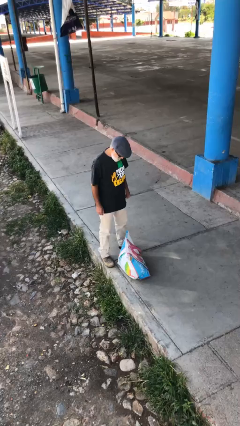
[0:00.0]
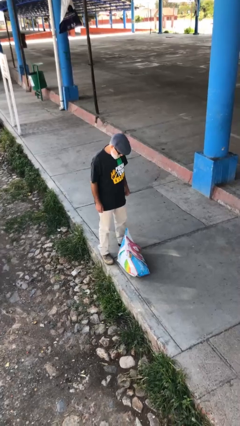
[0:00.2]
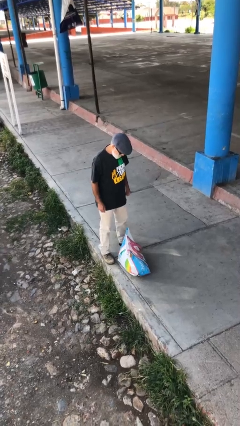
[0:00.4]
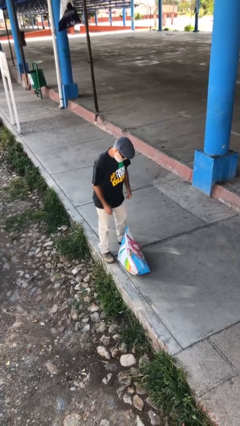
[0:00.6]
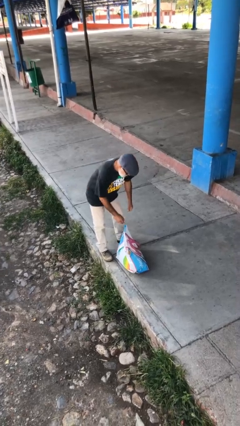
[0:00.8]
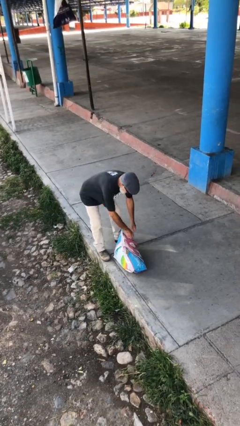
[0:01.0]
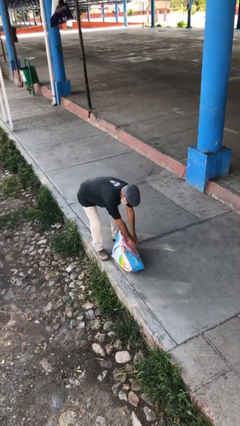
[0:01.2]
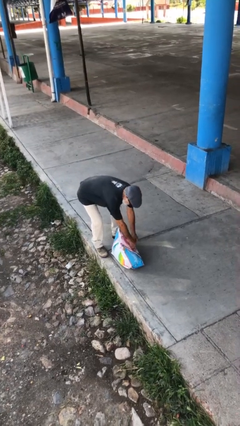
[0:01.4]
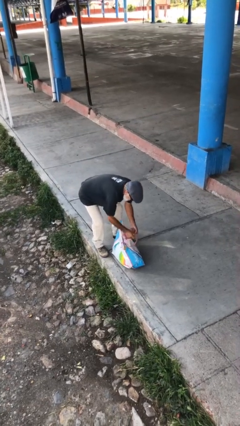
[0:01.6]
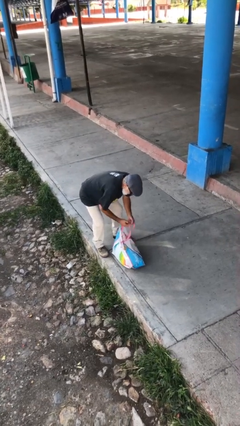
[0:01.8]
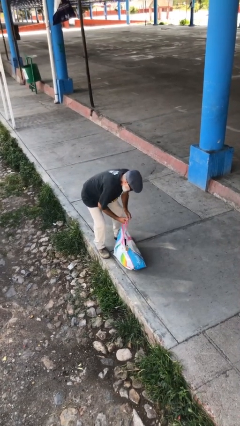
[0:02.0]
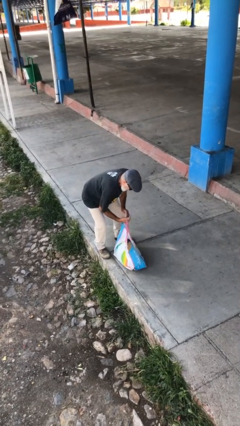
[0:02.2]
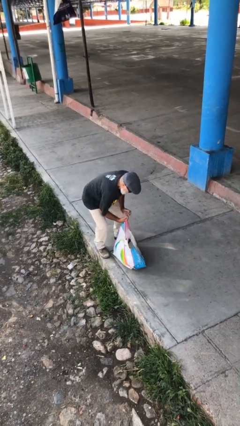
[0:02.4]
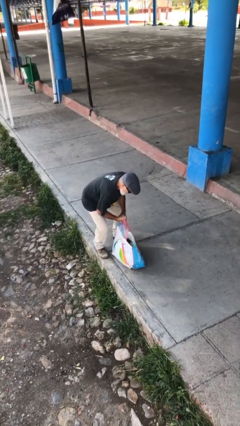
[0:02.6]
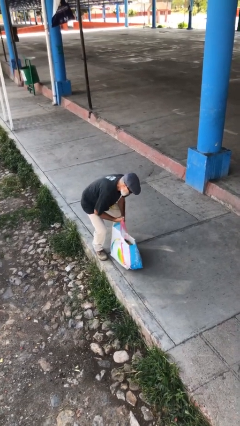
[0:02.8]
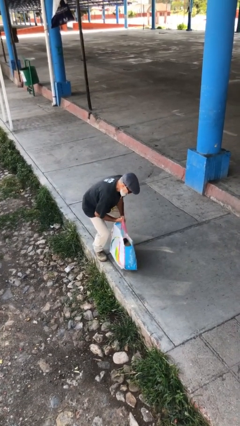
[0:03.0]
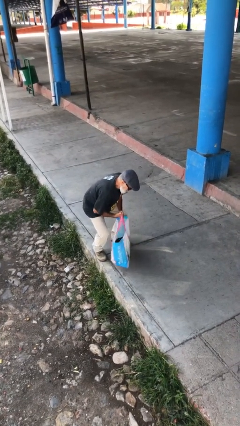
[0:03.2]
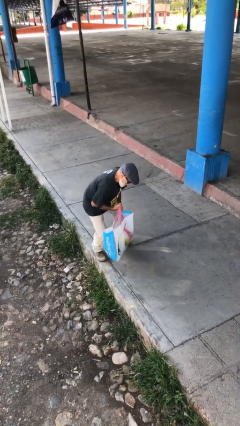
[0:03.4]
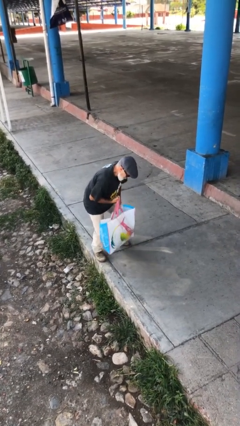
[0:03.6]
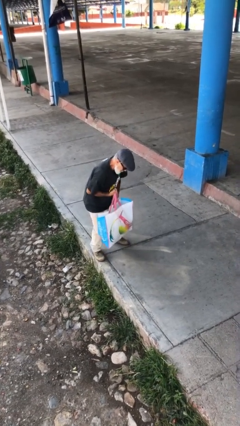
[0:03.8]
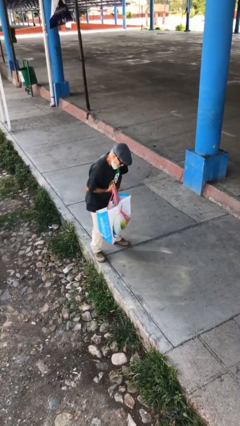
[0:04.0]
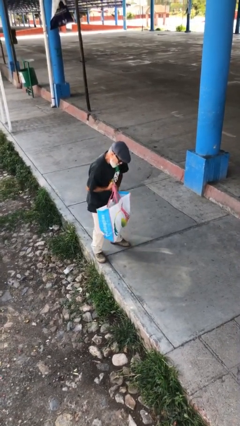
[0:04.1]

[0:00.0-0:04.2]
person picks up object from floor

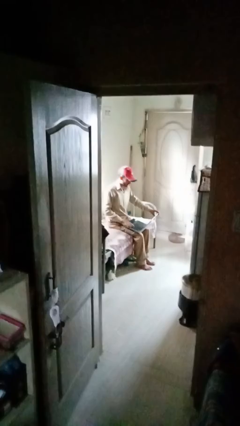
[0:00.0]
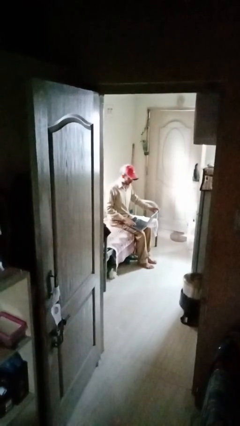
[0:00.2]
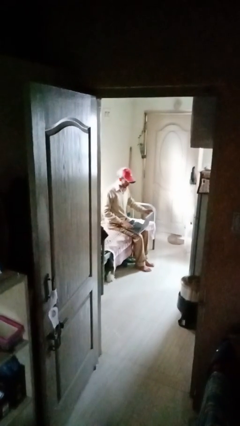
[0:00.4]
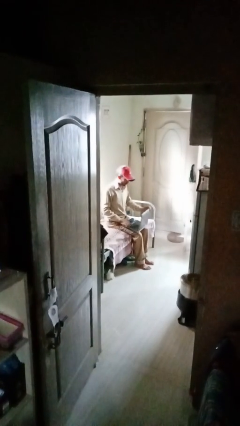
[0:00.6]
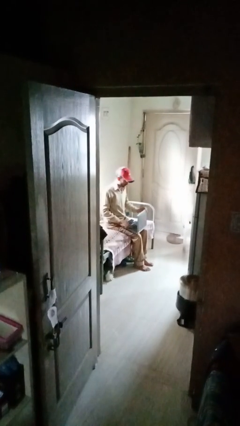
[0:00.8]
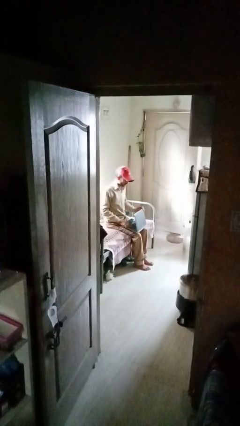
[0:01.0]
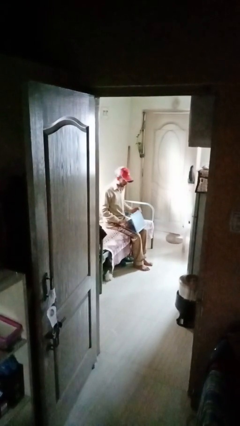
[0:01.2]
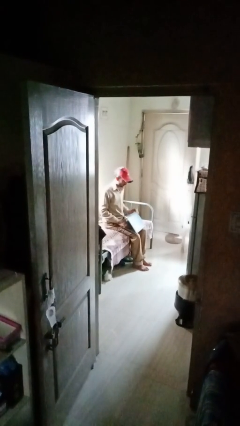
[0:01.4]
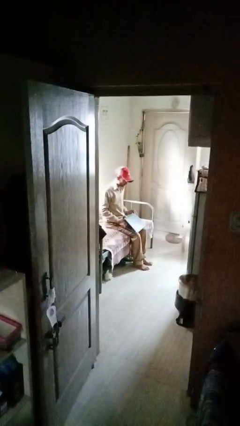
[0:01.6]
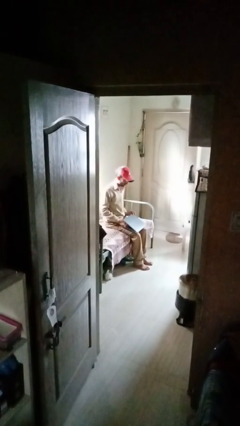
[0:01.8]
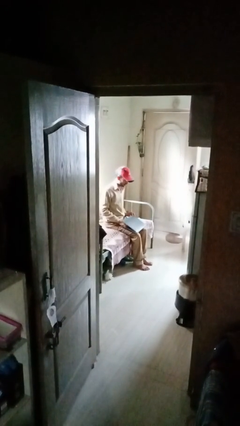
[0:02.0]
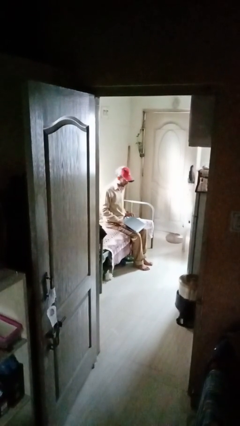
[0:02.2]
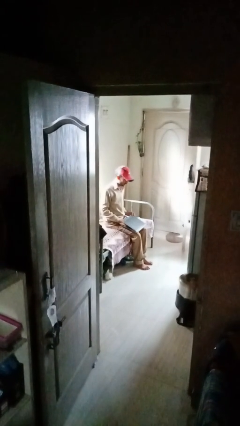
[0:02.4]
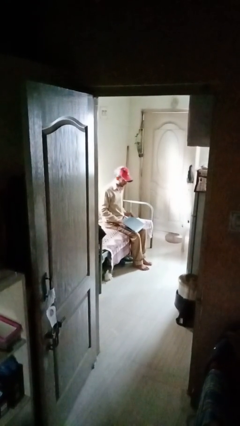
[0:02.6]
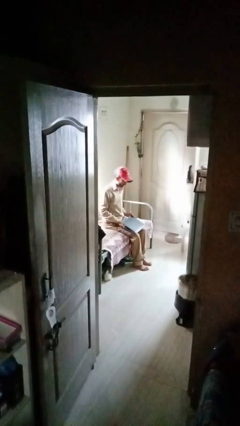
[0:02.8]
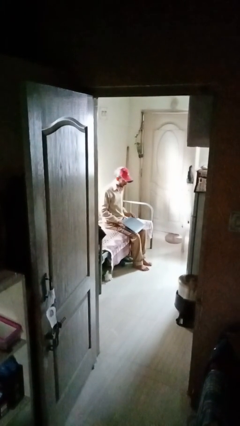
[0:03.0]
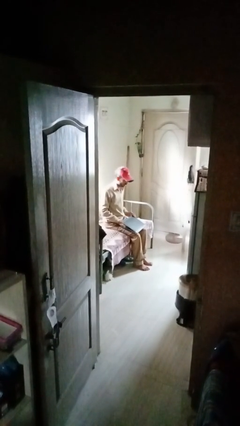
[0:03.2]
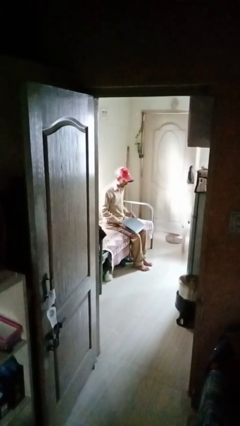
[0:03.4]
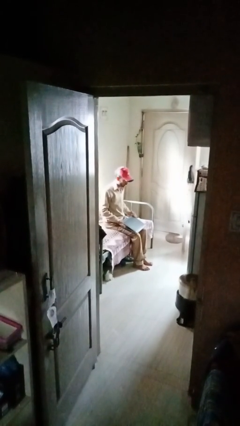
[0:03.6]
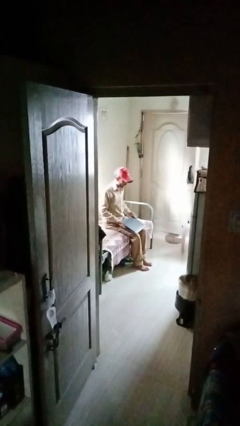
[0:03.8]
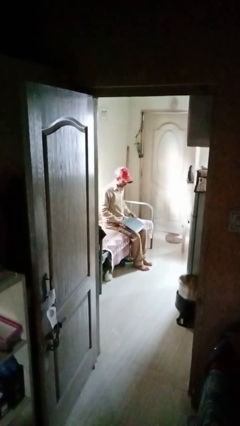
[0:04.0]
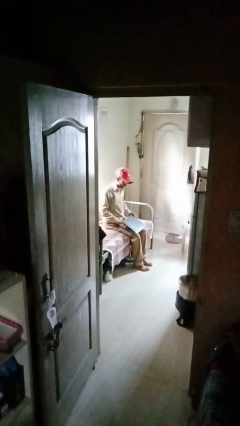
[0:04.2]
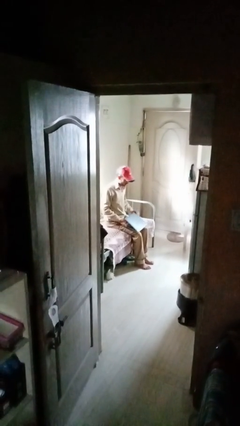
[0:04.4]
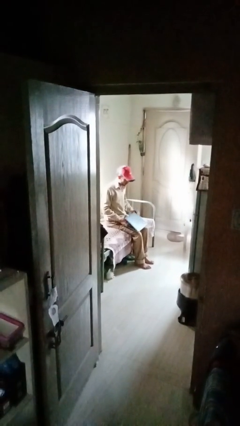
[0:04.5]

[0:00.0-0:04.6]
person closes laptop

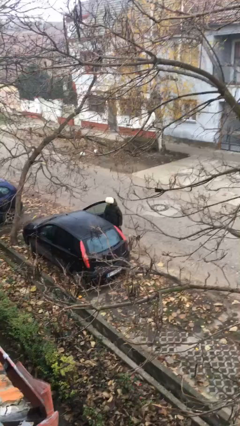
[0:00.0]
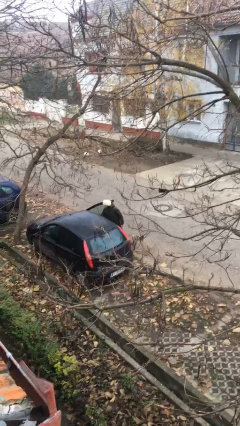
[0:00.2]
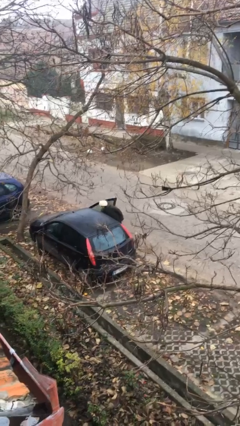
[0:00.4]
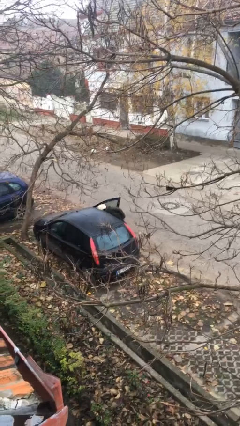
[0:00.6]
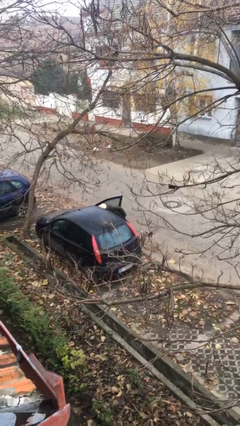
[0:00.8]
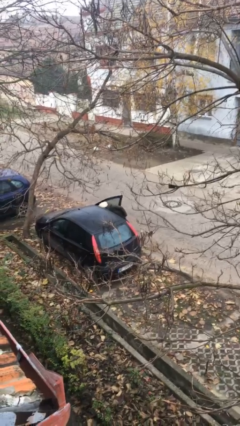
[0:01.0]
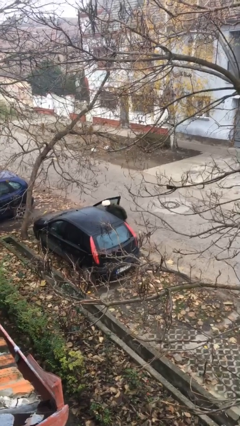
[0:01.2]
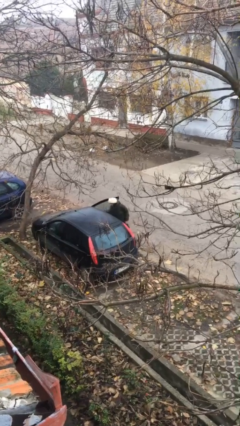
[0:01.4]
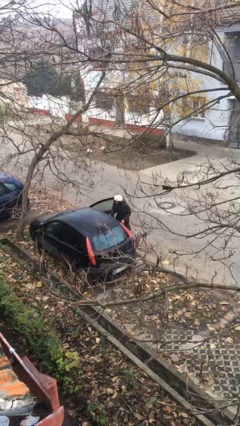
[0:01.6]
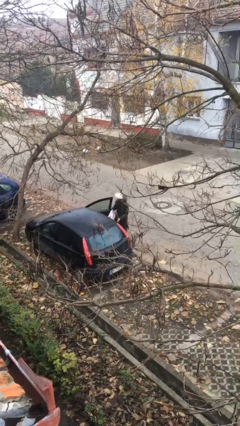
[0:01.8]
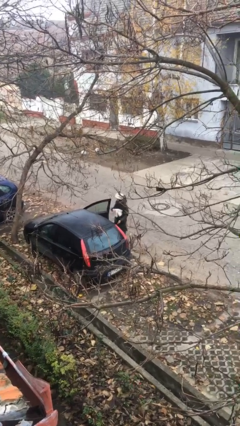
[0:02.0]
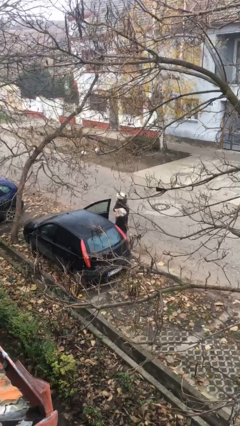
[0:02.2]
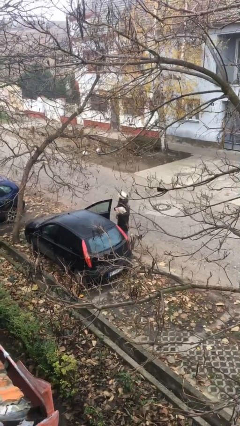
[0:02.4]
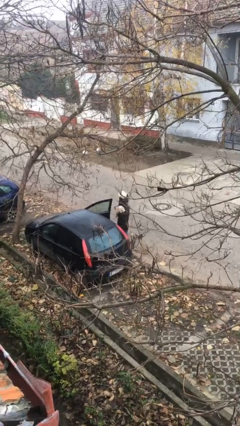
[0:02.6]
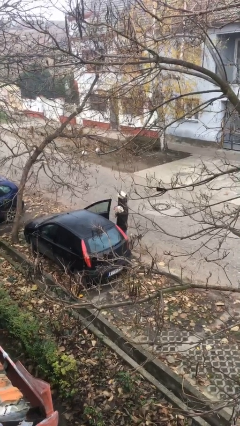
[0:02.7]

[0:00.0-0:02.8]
person unloads car

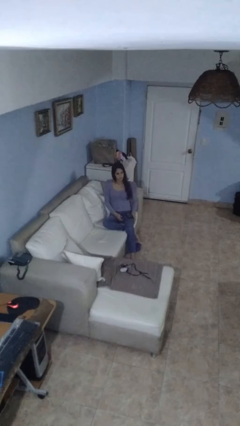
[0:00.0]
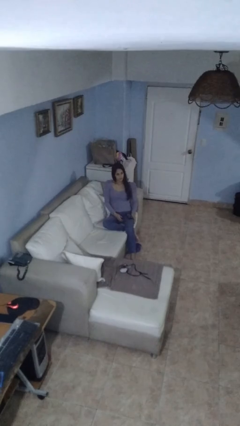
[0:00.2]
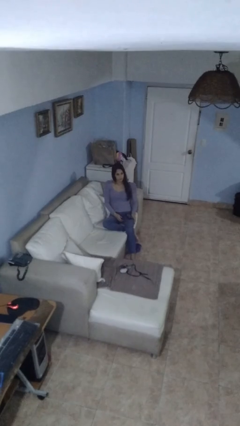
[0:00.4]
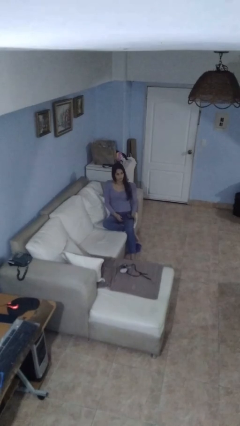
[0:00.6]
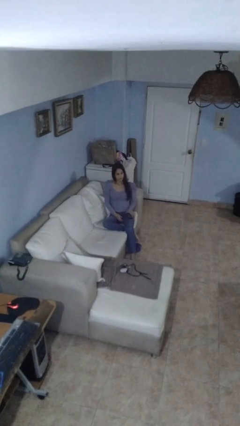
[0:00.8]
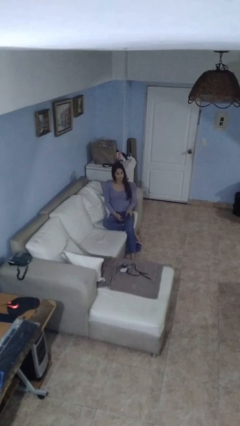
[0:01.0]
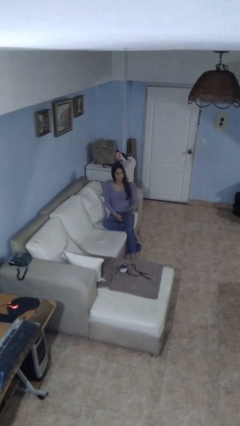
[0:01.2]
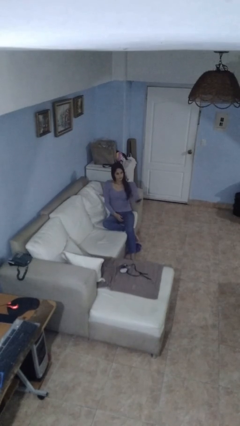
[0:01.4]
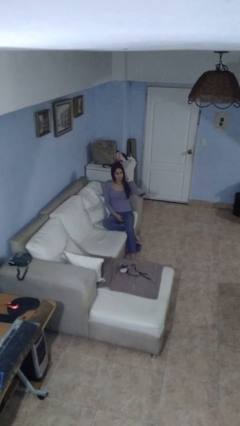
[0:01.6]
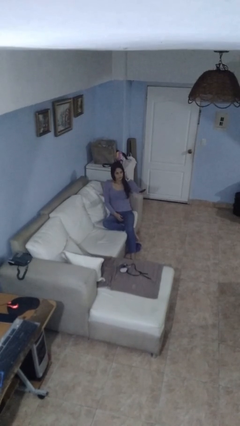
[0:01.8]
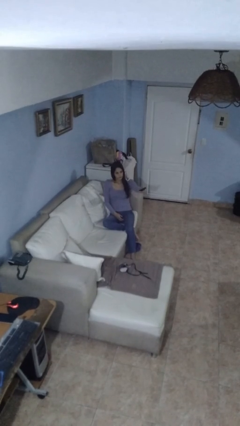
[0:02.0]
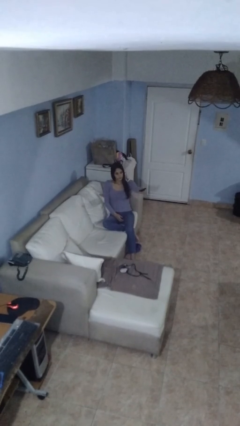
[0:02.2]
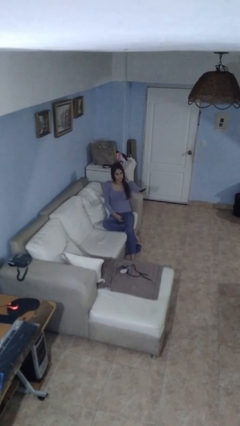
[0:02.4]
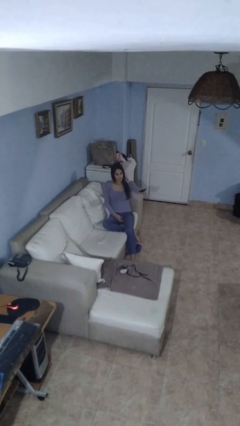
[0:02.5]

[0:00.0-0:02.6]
person uses television remote

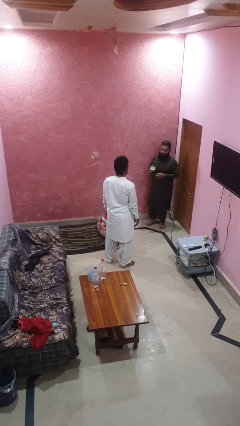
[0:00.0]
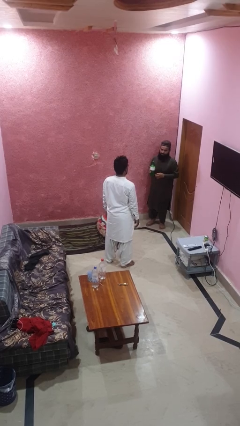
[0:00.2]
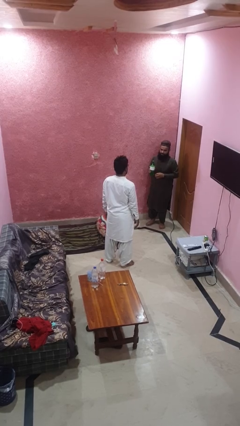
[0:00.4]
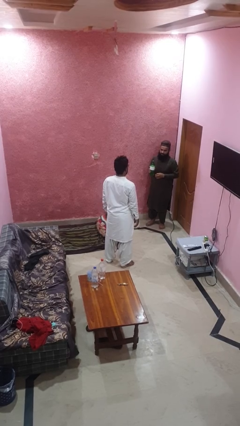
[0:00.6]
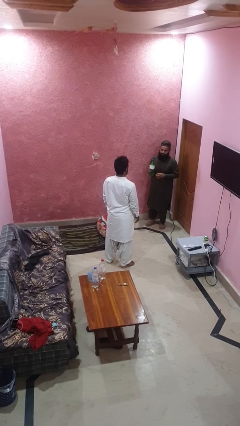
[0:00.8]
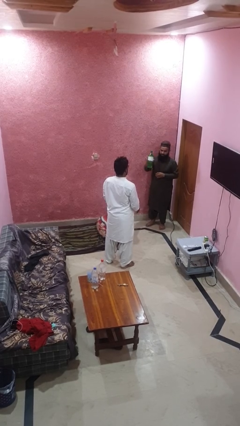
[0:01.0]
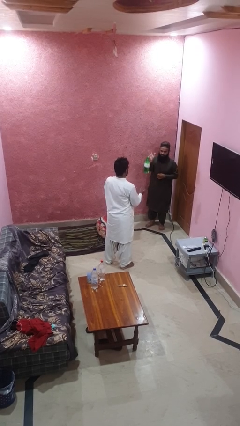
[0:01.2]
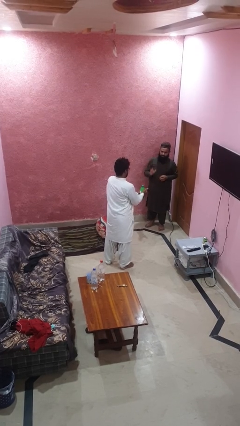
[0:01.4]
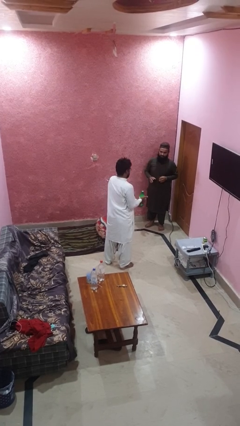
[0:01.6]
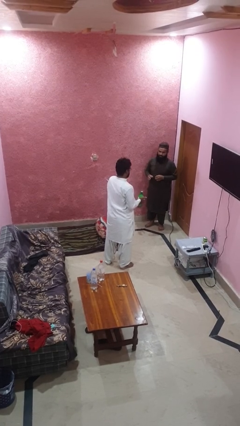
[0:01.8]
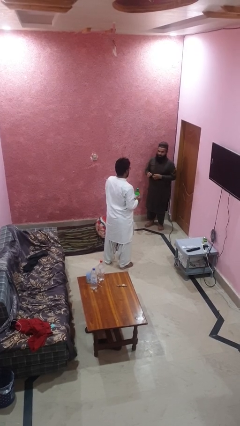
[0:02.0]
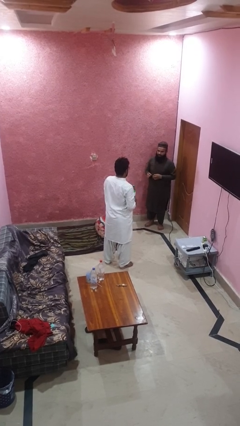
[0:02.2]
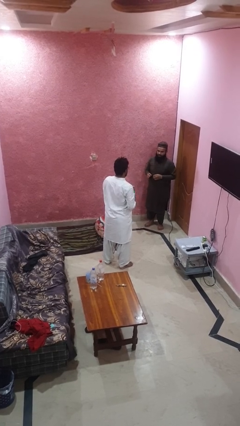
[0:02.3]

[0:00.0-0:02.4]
person catches object from person

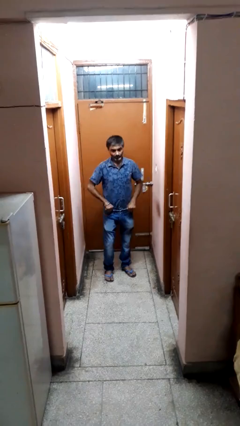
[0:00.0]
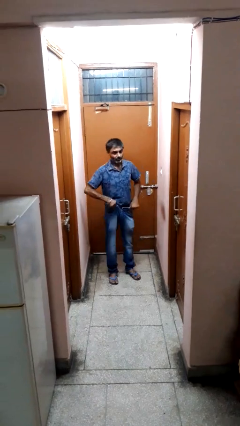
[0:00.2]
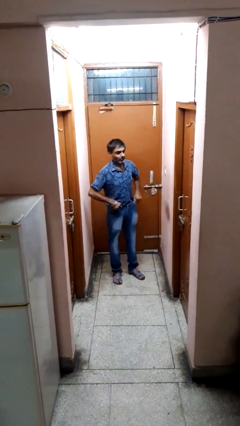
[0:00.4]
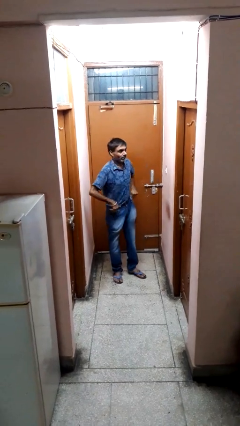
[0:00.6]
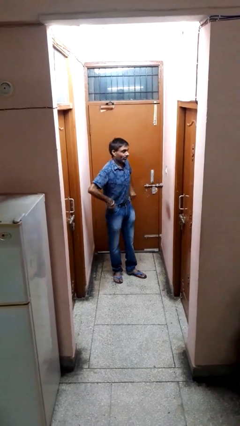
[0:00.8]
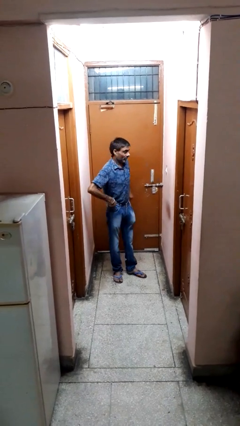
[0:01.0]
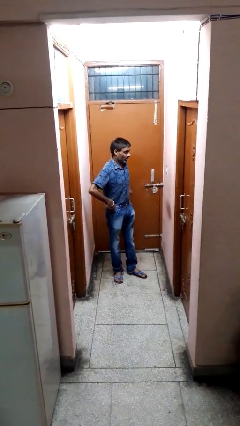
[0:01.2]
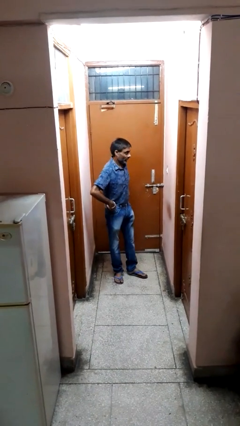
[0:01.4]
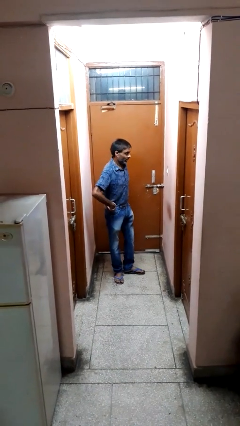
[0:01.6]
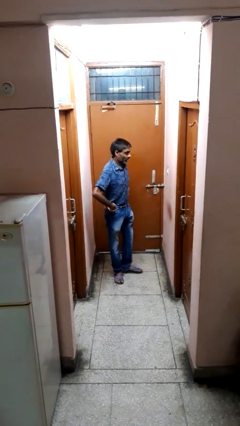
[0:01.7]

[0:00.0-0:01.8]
person hikes up pants
